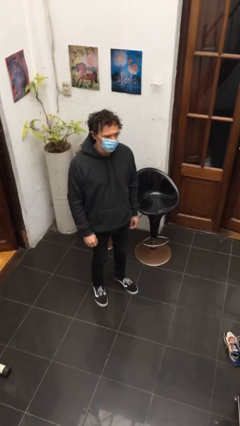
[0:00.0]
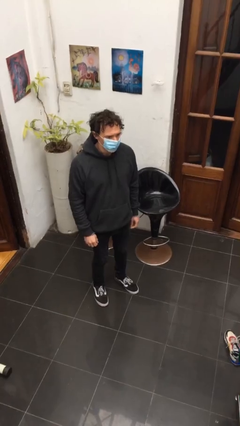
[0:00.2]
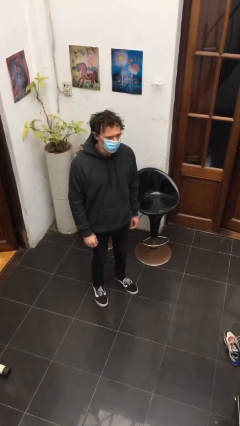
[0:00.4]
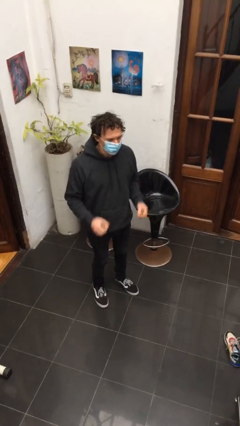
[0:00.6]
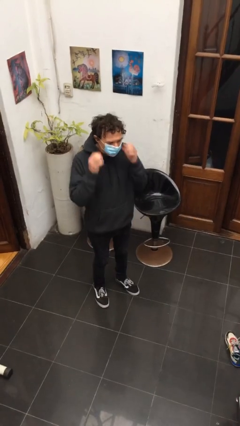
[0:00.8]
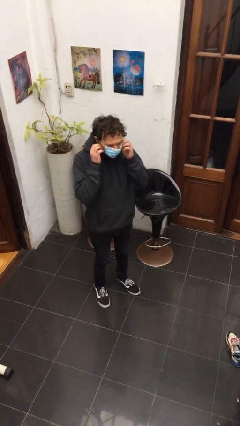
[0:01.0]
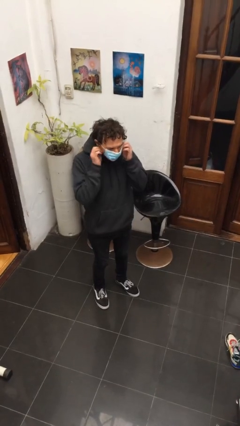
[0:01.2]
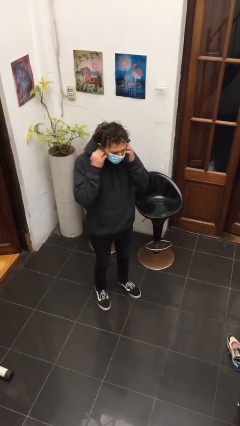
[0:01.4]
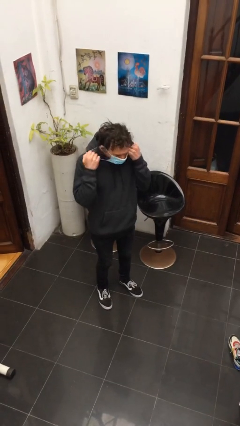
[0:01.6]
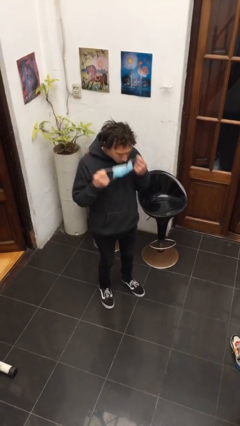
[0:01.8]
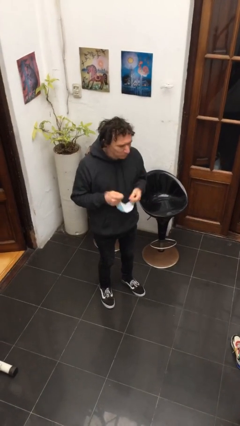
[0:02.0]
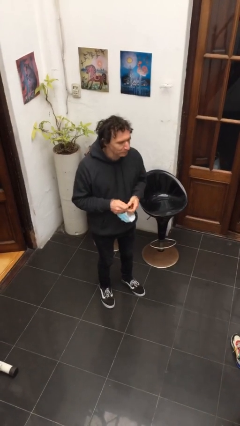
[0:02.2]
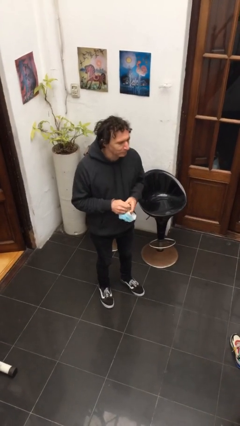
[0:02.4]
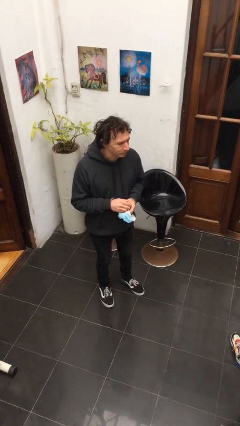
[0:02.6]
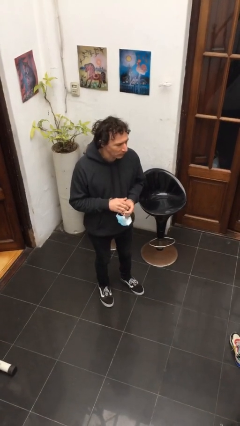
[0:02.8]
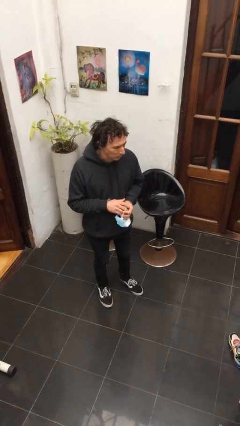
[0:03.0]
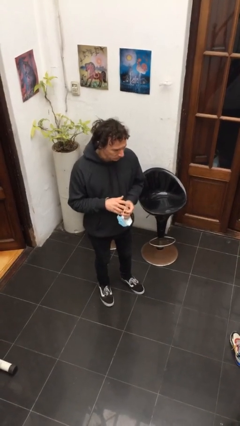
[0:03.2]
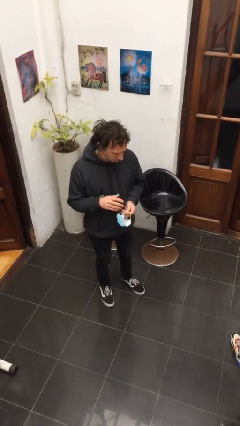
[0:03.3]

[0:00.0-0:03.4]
person takes off facemask

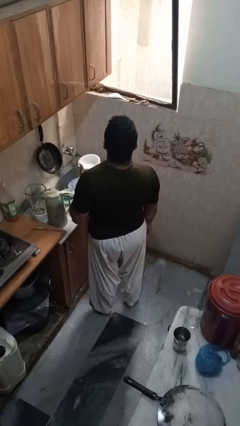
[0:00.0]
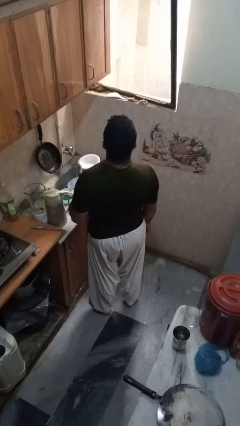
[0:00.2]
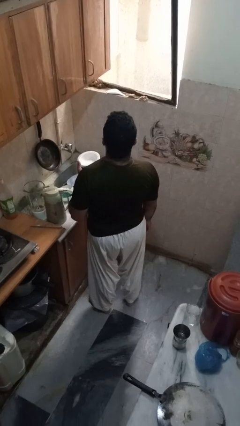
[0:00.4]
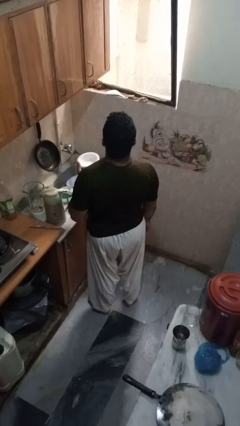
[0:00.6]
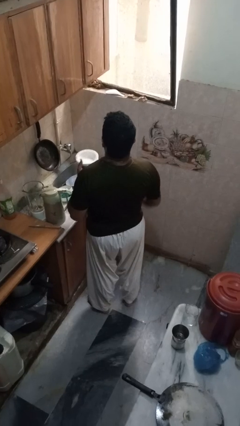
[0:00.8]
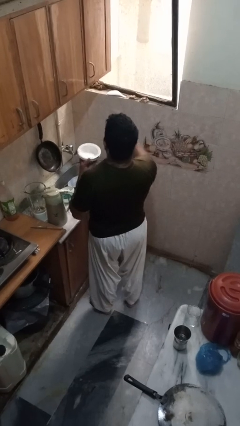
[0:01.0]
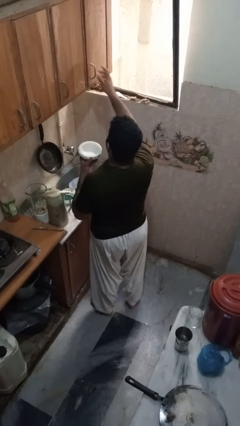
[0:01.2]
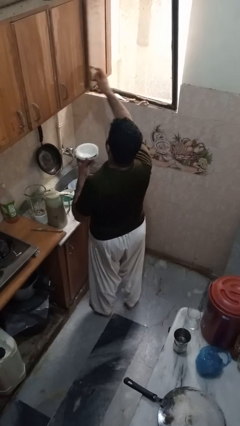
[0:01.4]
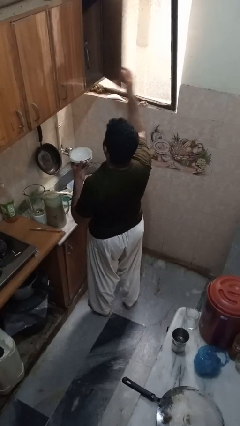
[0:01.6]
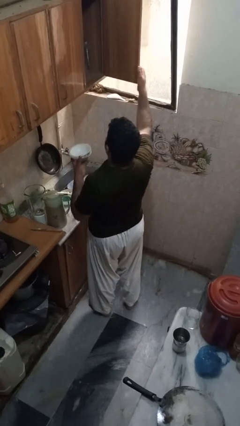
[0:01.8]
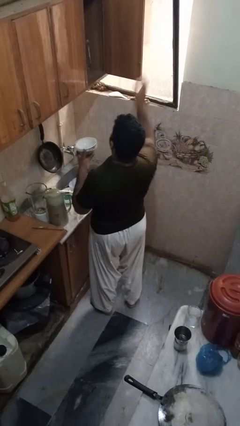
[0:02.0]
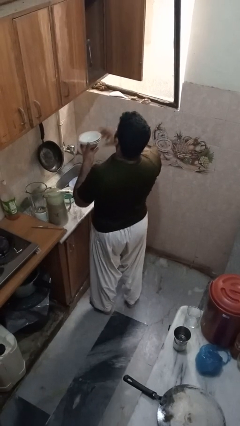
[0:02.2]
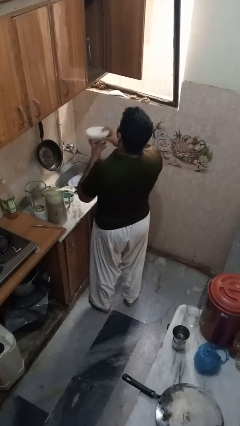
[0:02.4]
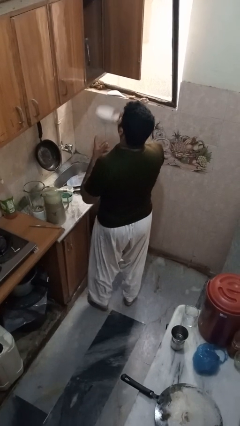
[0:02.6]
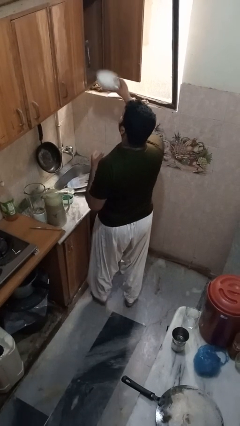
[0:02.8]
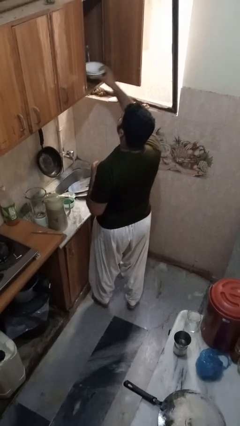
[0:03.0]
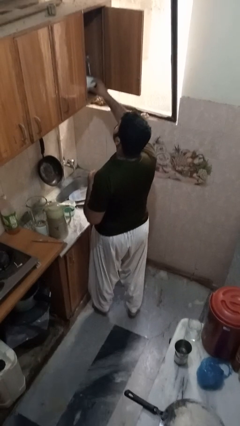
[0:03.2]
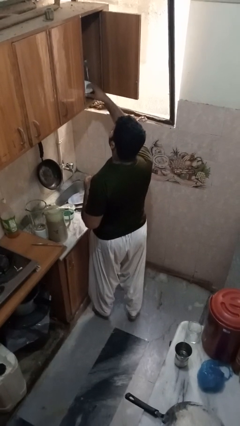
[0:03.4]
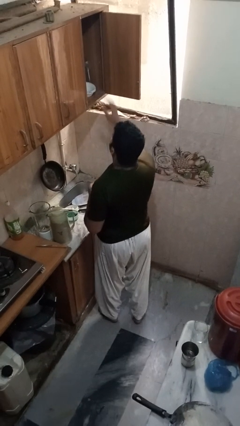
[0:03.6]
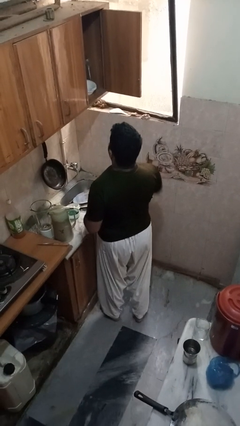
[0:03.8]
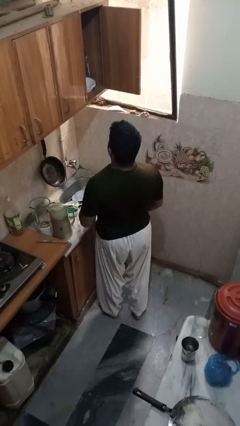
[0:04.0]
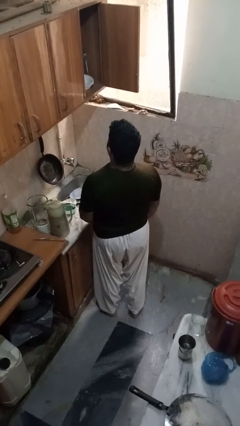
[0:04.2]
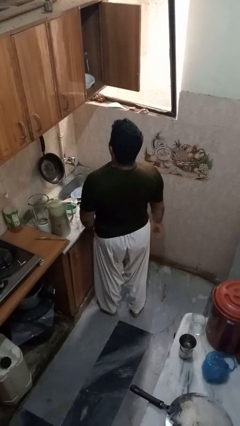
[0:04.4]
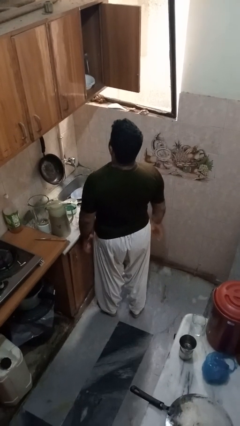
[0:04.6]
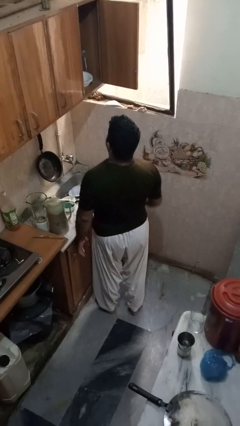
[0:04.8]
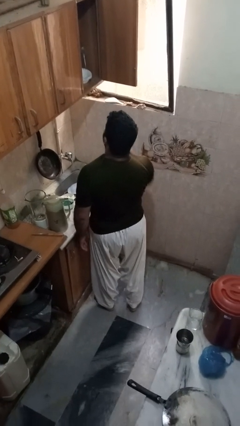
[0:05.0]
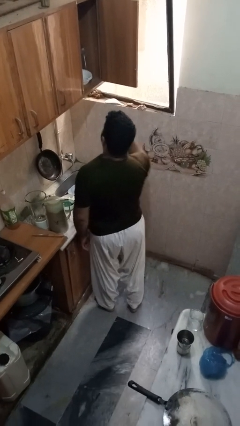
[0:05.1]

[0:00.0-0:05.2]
person puts object in cabinet

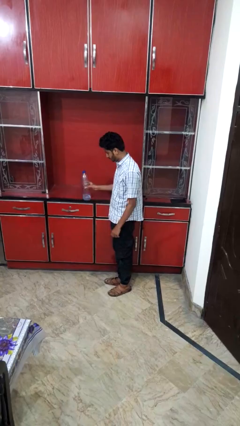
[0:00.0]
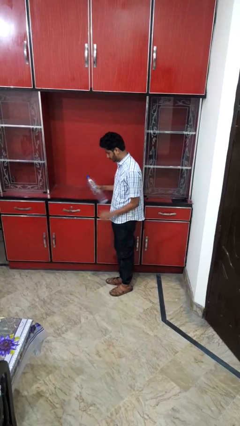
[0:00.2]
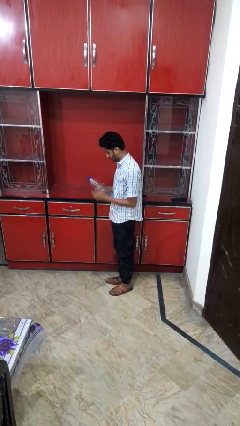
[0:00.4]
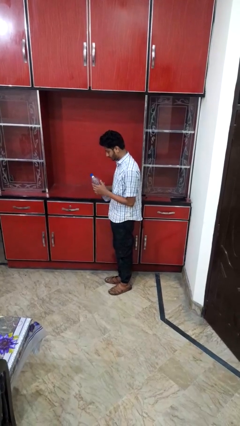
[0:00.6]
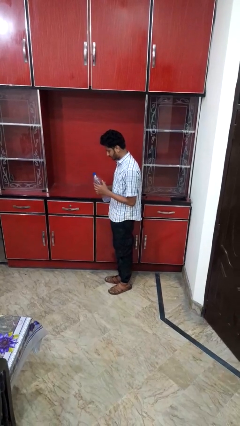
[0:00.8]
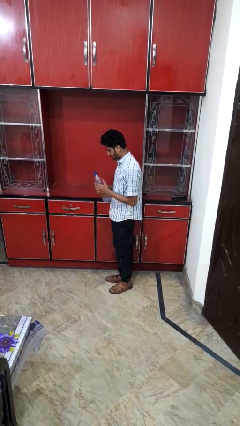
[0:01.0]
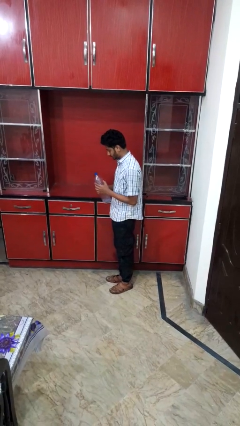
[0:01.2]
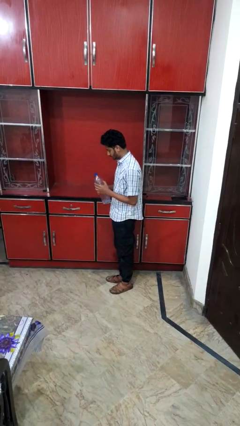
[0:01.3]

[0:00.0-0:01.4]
person picks up object from countertop

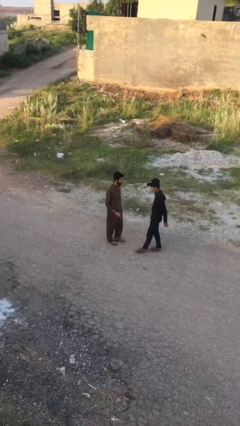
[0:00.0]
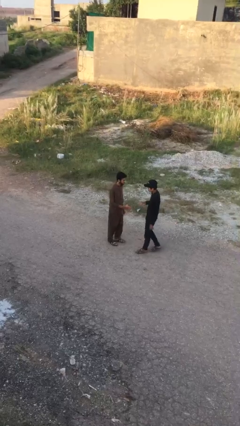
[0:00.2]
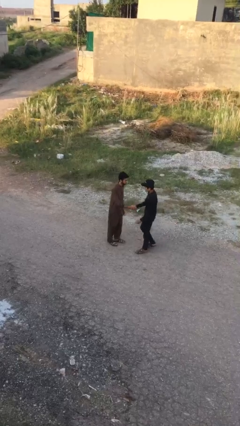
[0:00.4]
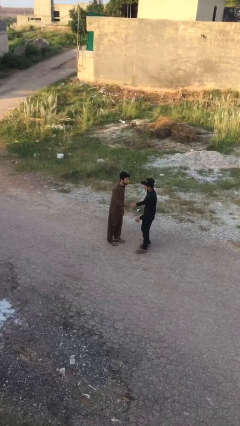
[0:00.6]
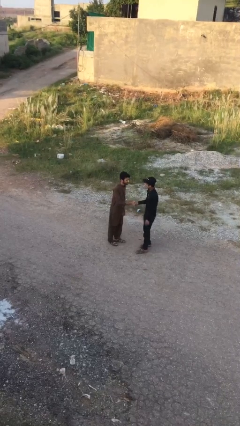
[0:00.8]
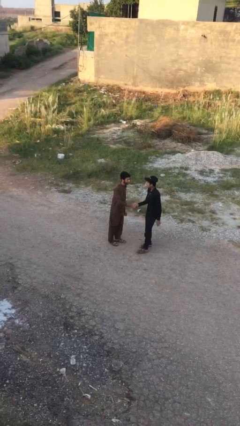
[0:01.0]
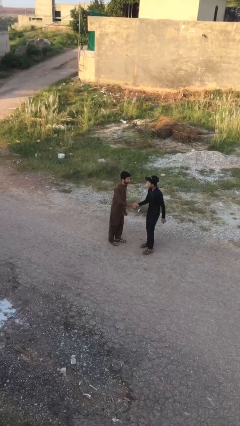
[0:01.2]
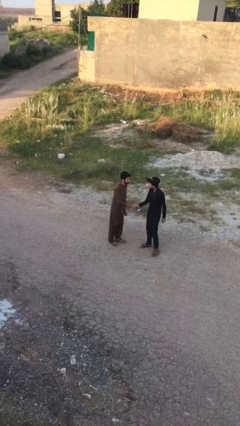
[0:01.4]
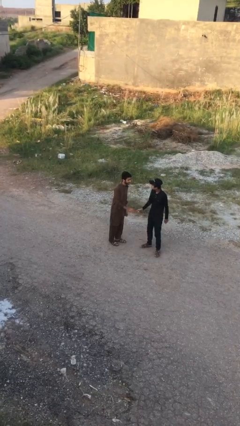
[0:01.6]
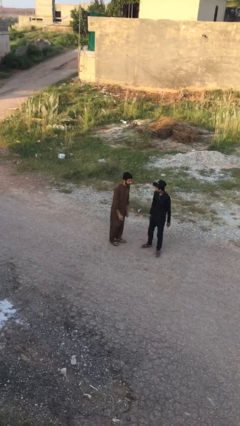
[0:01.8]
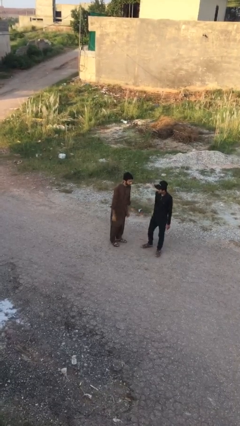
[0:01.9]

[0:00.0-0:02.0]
person shakes hand

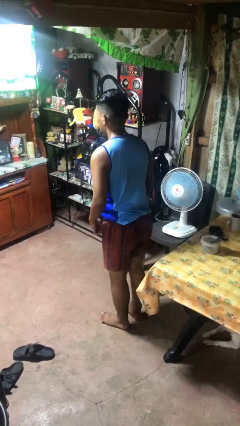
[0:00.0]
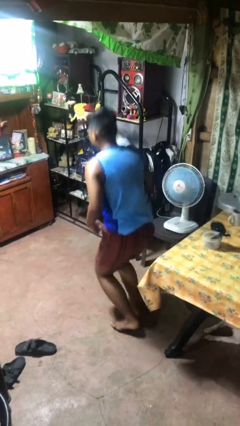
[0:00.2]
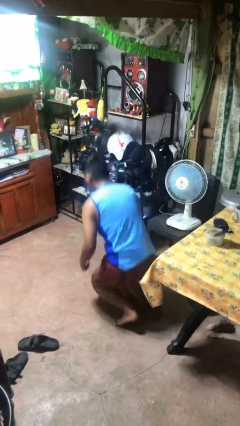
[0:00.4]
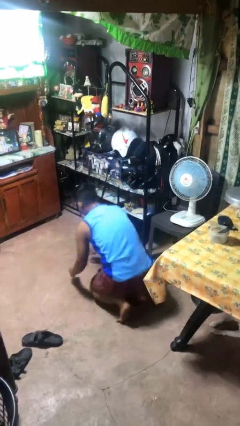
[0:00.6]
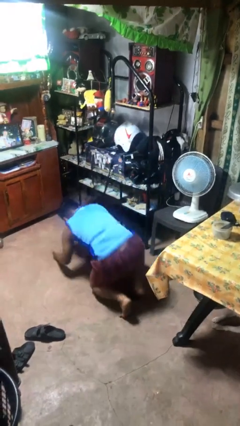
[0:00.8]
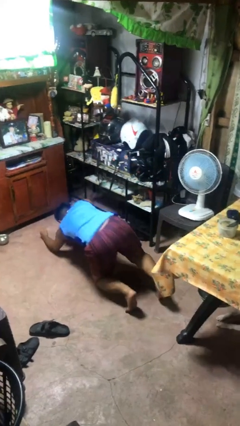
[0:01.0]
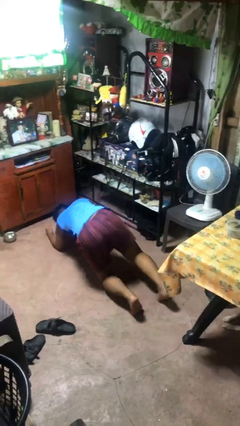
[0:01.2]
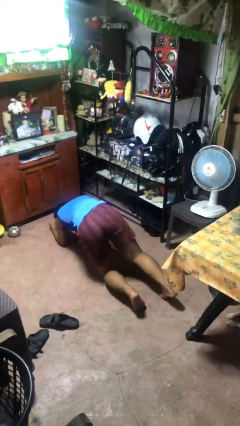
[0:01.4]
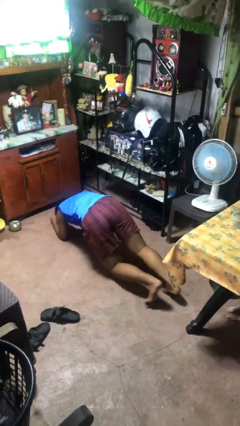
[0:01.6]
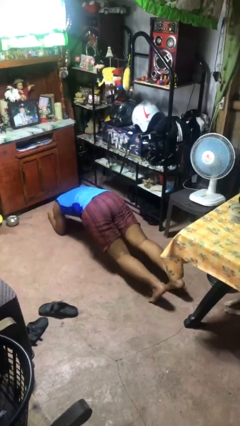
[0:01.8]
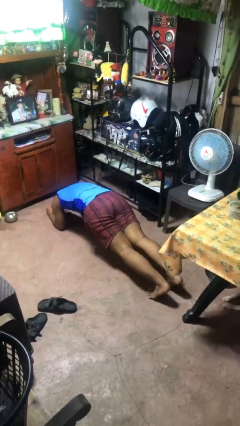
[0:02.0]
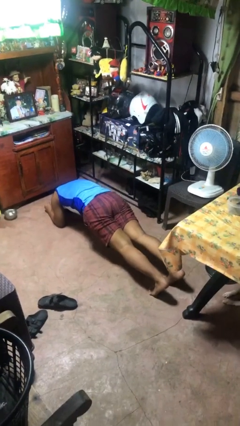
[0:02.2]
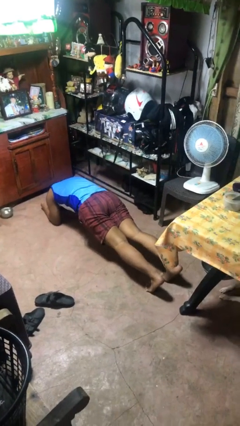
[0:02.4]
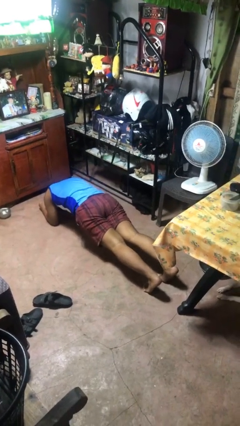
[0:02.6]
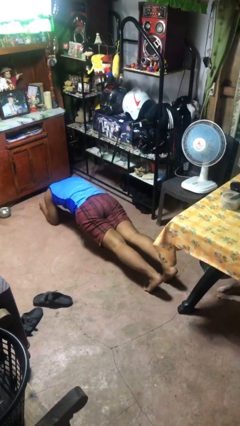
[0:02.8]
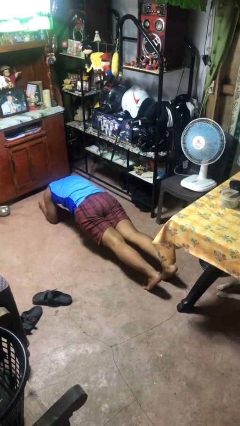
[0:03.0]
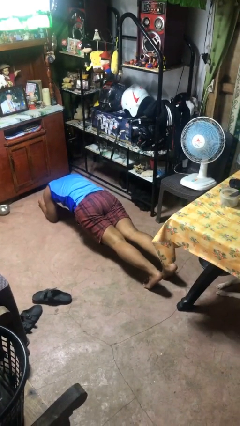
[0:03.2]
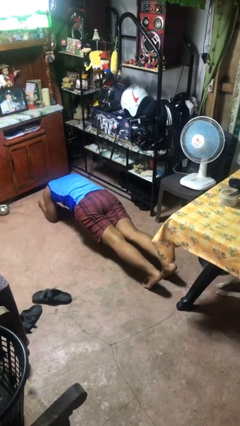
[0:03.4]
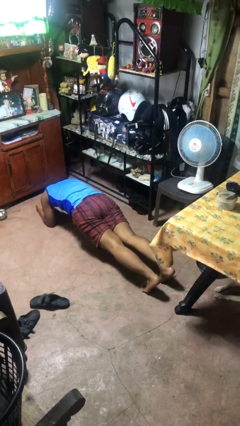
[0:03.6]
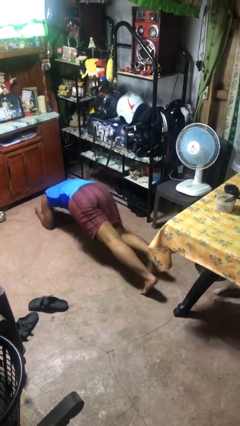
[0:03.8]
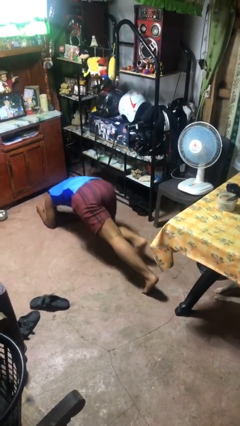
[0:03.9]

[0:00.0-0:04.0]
person exercises with plank

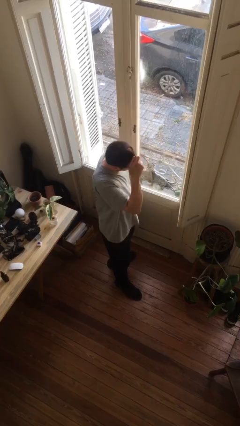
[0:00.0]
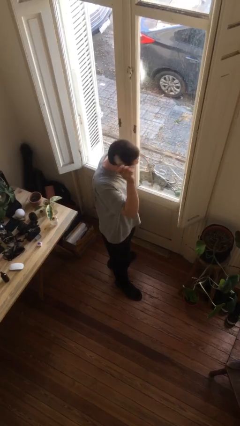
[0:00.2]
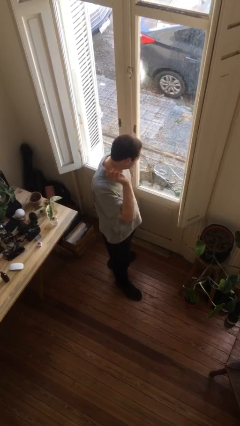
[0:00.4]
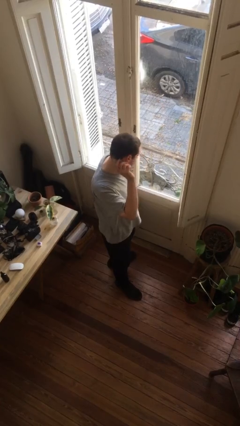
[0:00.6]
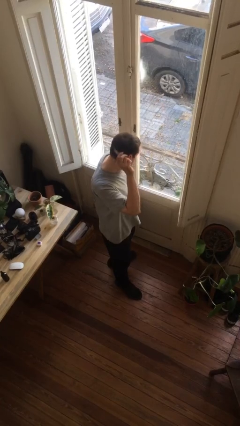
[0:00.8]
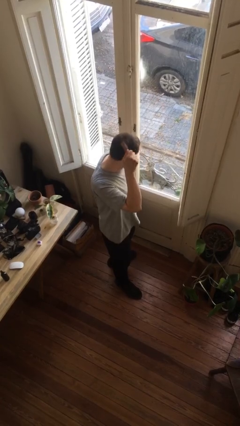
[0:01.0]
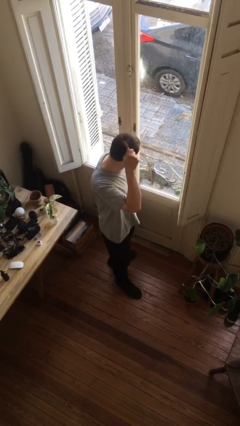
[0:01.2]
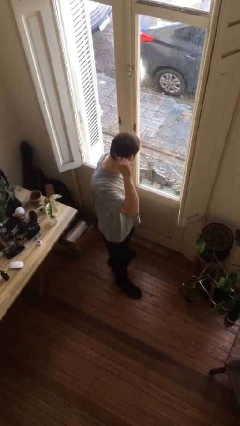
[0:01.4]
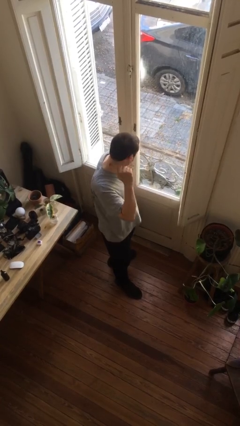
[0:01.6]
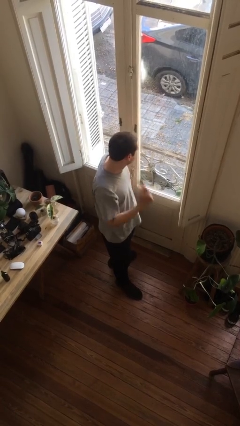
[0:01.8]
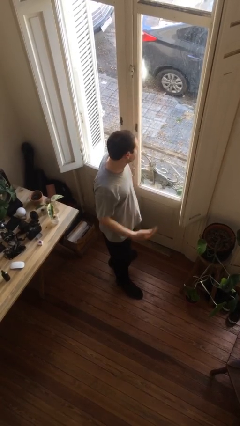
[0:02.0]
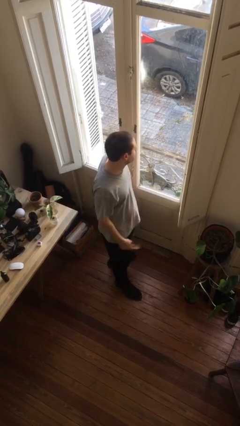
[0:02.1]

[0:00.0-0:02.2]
person brushes hair
